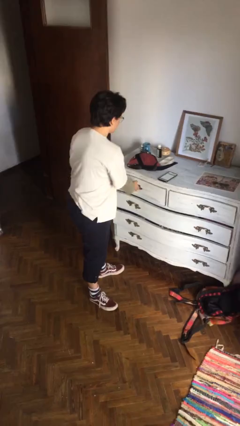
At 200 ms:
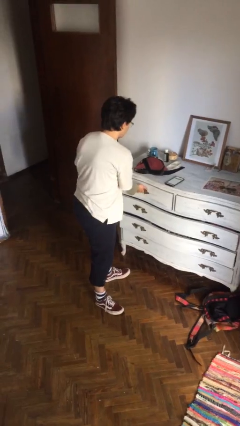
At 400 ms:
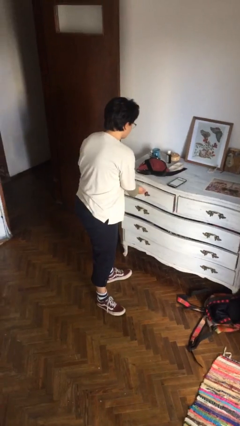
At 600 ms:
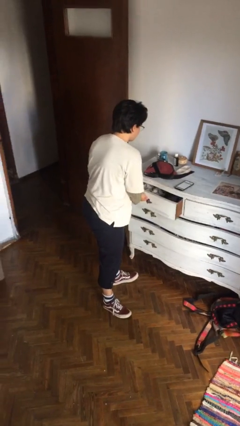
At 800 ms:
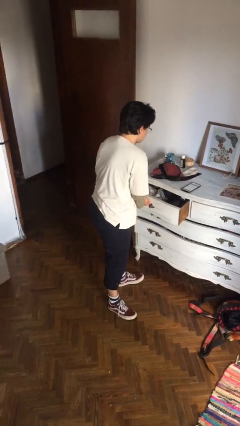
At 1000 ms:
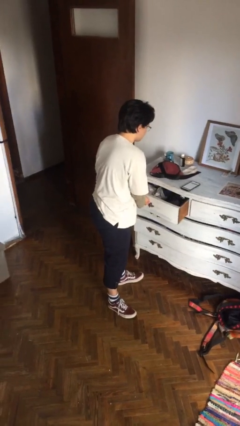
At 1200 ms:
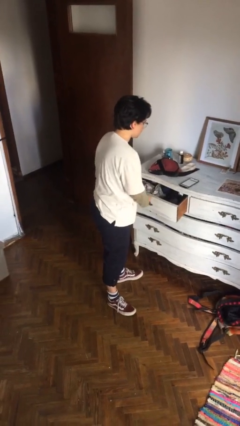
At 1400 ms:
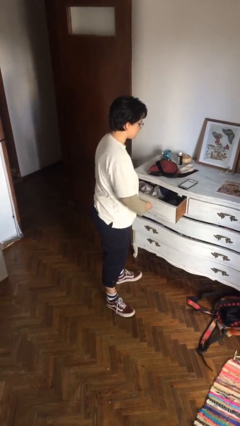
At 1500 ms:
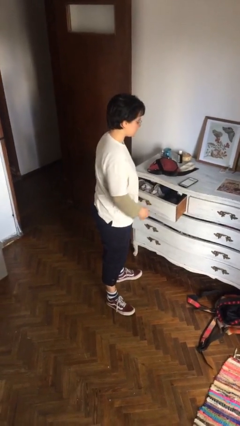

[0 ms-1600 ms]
person opens dresser drawer

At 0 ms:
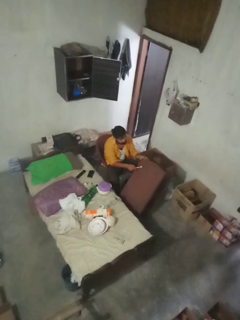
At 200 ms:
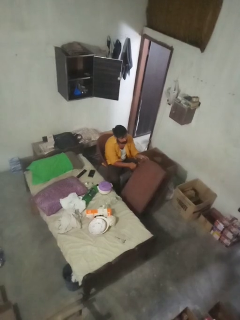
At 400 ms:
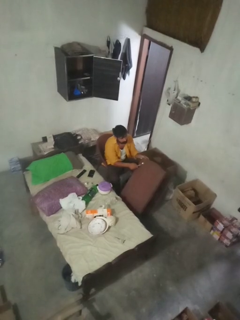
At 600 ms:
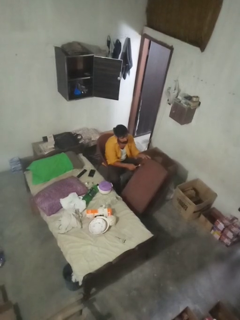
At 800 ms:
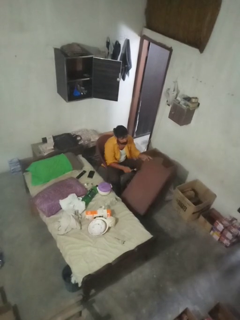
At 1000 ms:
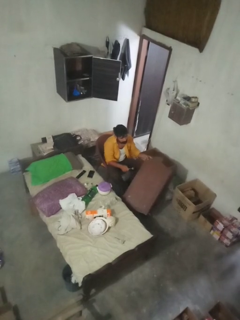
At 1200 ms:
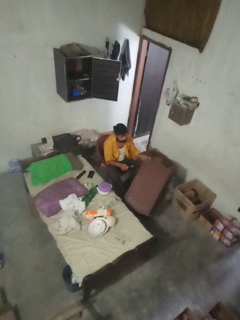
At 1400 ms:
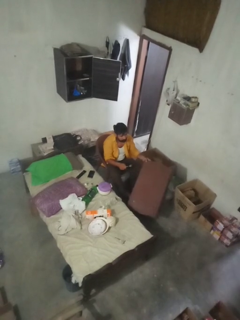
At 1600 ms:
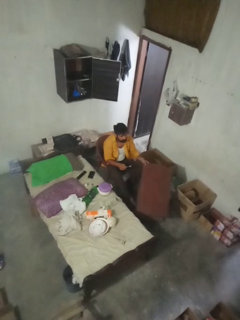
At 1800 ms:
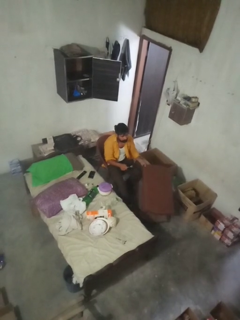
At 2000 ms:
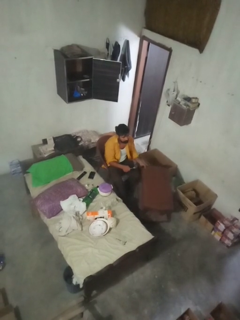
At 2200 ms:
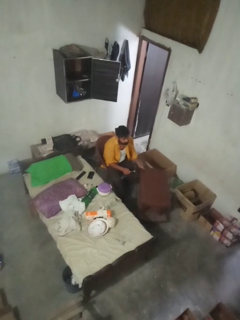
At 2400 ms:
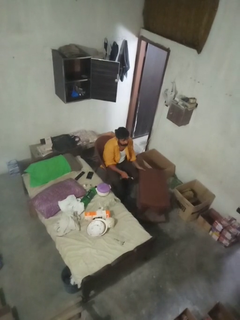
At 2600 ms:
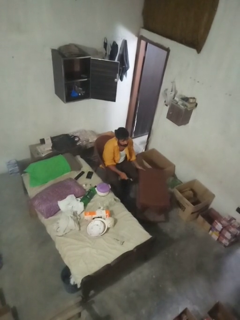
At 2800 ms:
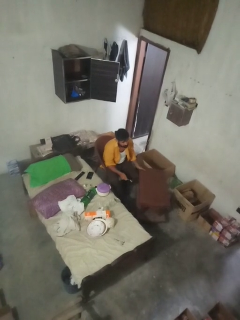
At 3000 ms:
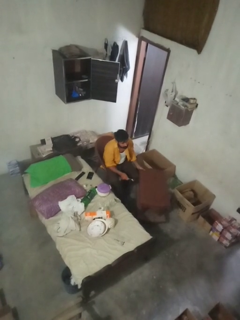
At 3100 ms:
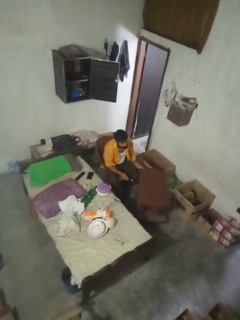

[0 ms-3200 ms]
person sets upright furniture

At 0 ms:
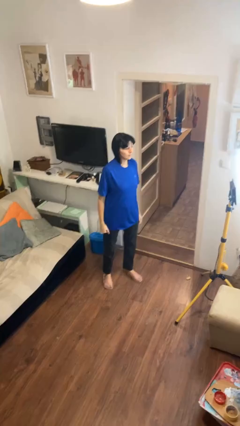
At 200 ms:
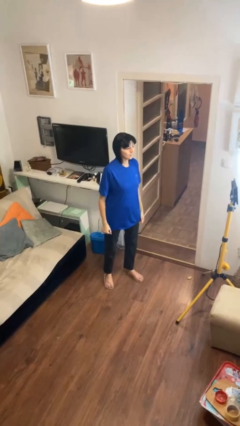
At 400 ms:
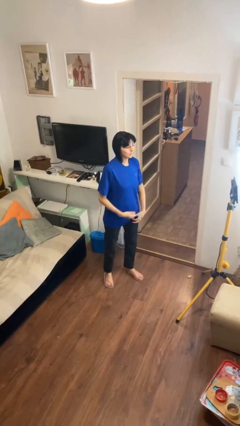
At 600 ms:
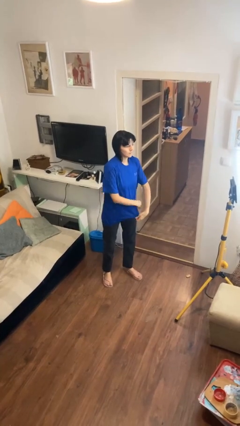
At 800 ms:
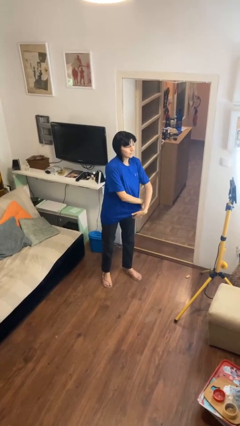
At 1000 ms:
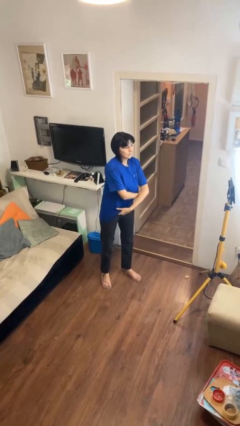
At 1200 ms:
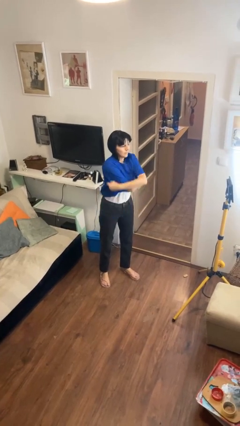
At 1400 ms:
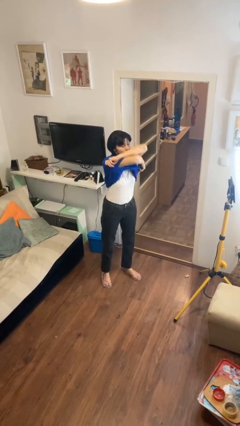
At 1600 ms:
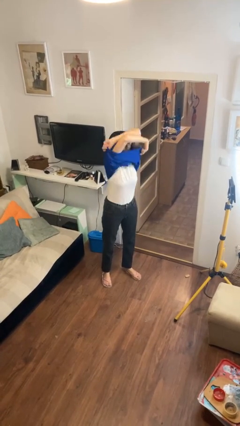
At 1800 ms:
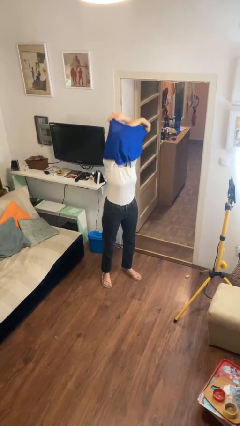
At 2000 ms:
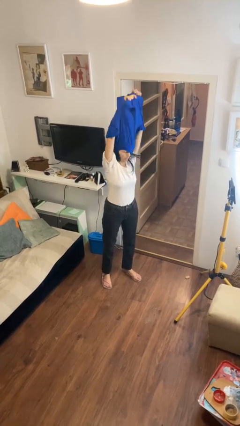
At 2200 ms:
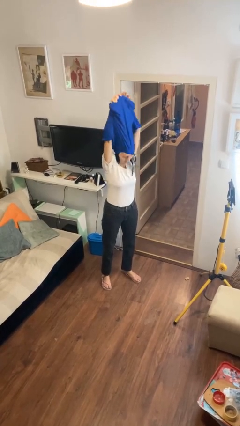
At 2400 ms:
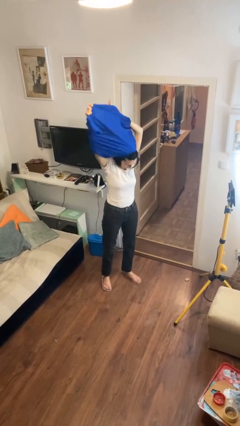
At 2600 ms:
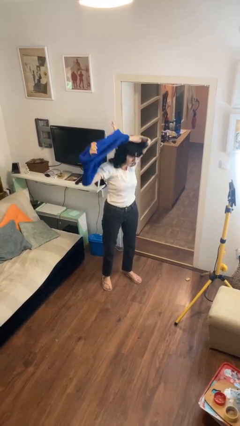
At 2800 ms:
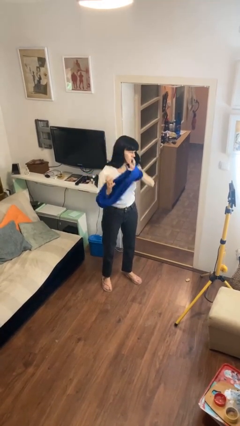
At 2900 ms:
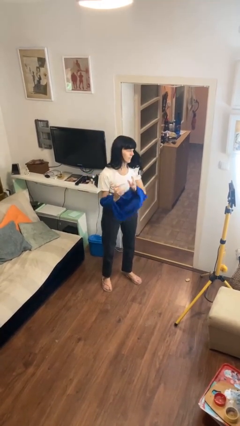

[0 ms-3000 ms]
person takes off shirt

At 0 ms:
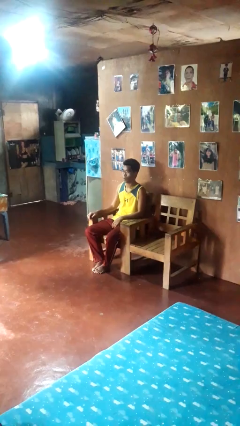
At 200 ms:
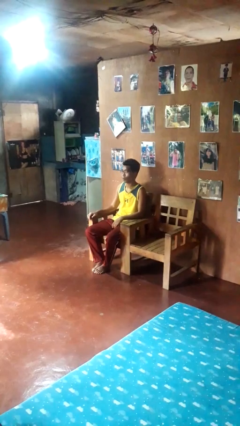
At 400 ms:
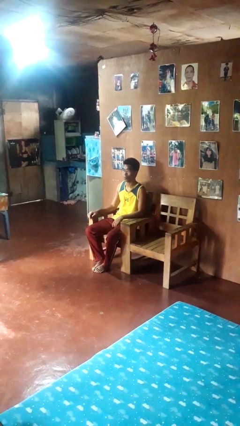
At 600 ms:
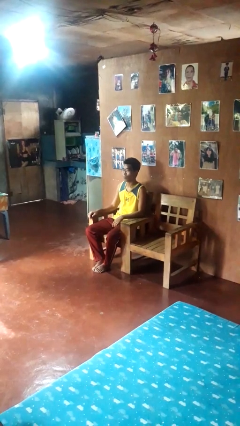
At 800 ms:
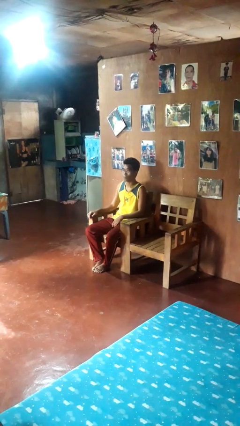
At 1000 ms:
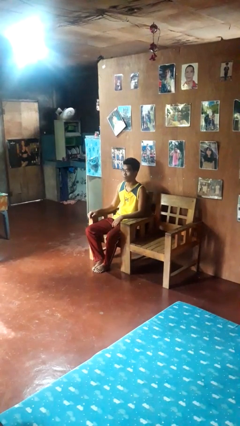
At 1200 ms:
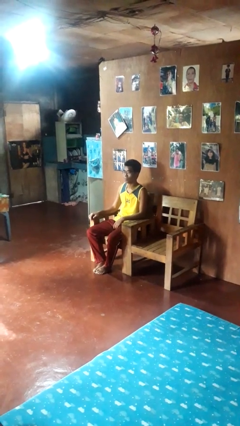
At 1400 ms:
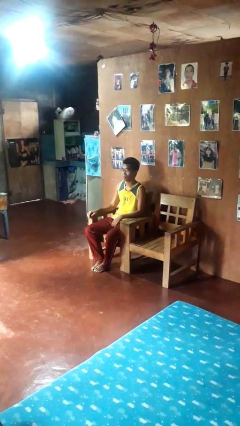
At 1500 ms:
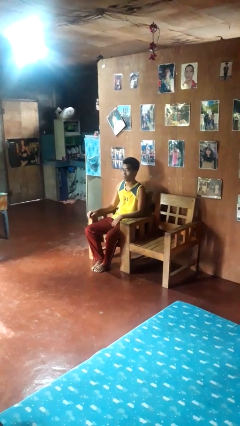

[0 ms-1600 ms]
person shakes head

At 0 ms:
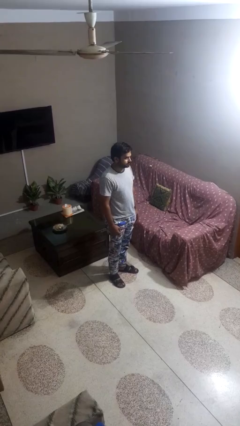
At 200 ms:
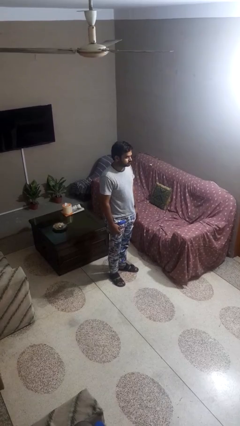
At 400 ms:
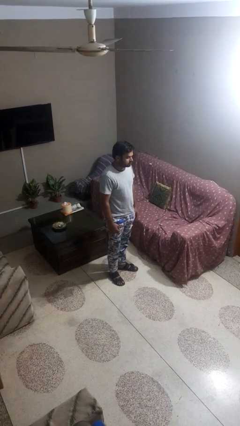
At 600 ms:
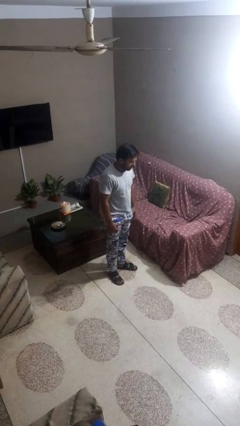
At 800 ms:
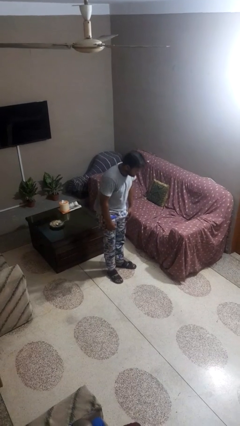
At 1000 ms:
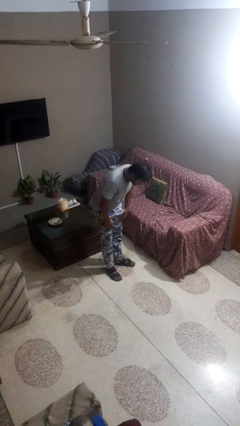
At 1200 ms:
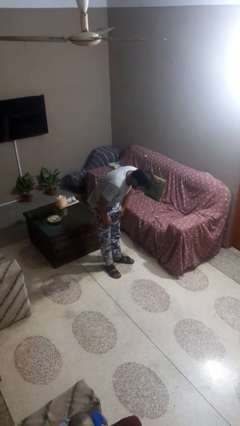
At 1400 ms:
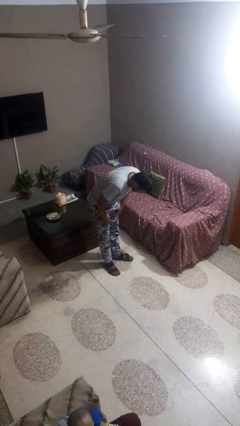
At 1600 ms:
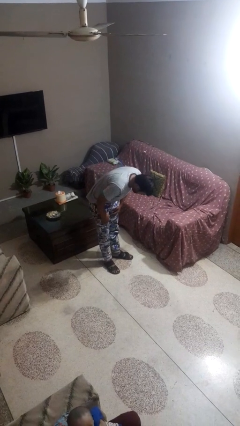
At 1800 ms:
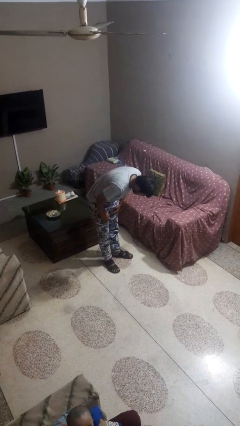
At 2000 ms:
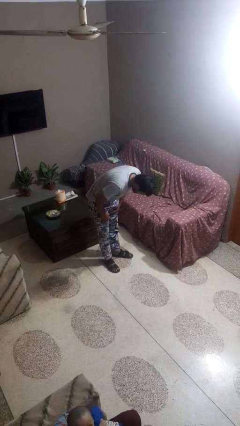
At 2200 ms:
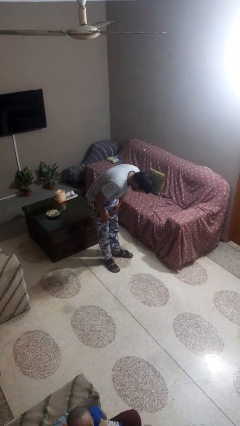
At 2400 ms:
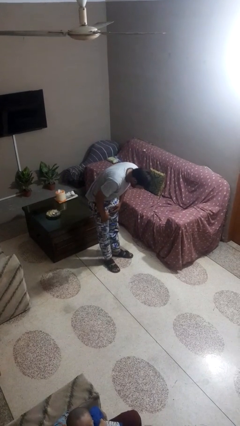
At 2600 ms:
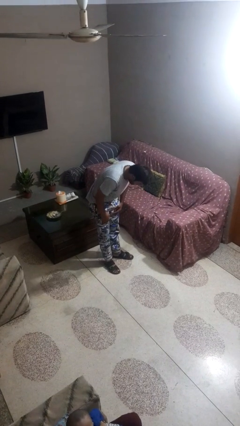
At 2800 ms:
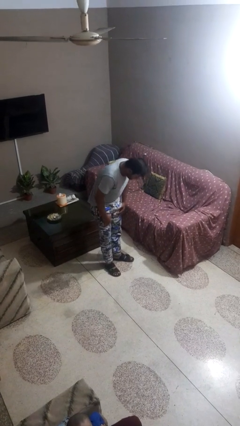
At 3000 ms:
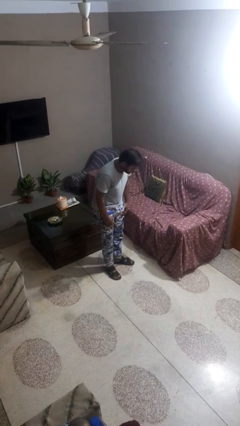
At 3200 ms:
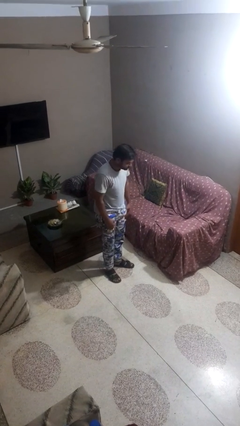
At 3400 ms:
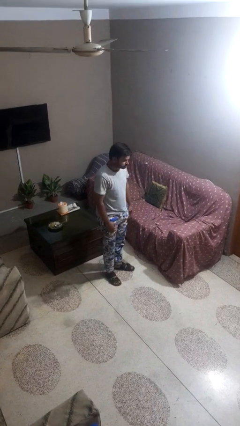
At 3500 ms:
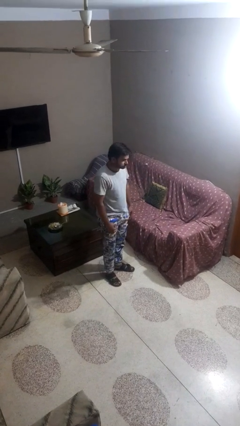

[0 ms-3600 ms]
person bows

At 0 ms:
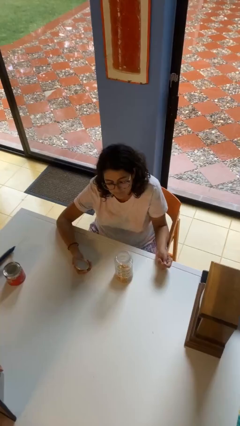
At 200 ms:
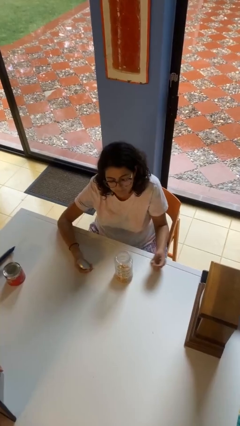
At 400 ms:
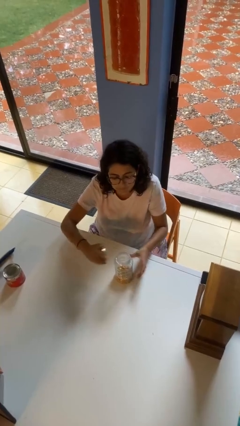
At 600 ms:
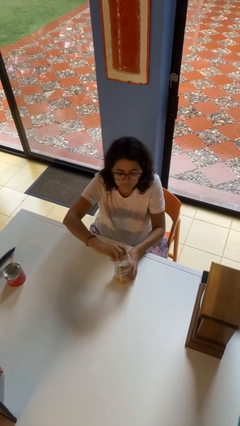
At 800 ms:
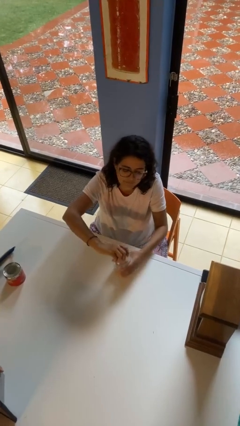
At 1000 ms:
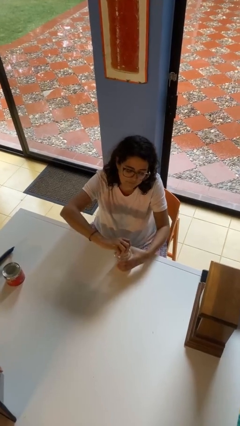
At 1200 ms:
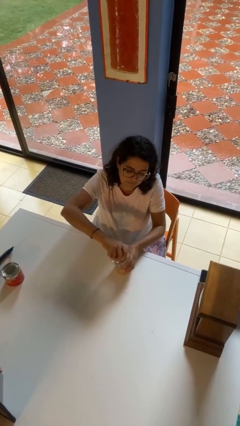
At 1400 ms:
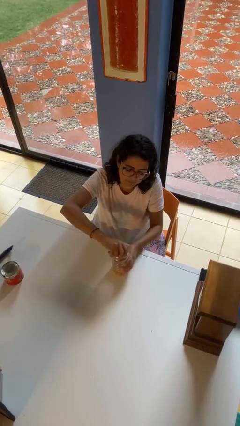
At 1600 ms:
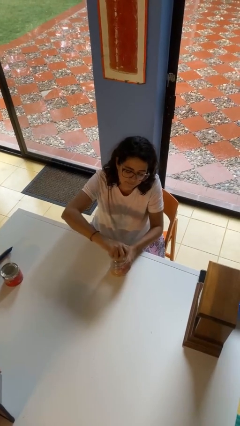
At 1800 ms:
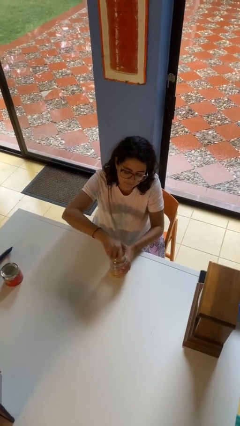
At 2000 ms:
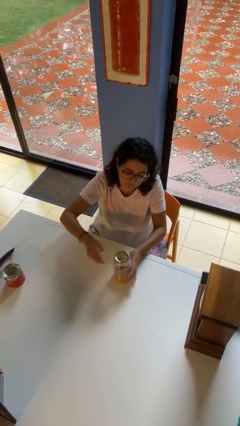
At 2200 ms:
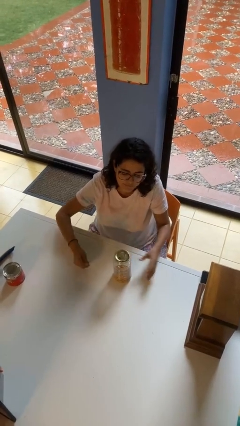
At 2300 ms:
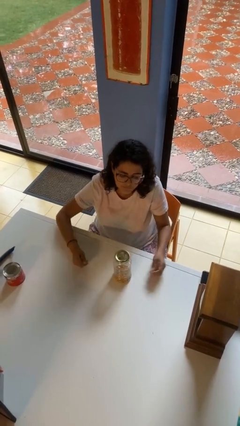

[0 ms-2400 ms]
person closes jar

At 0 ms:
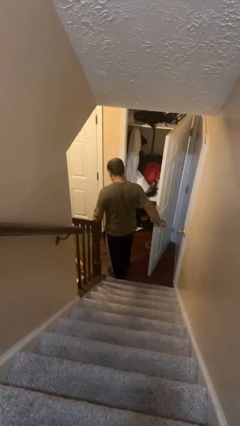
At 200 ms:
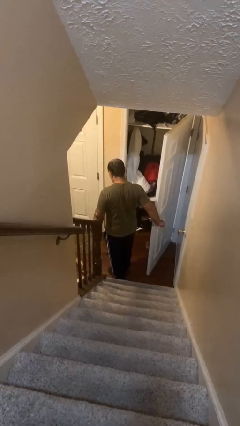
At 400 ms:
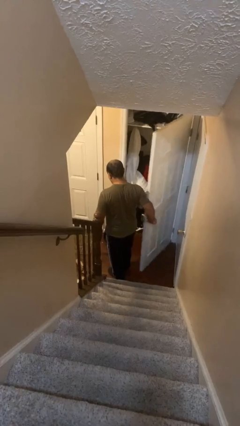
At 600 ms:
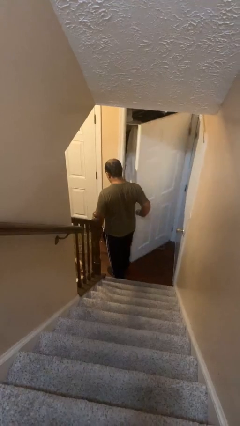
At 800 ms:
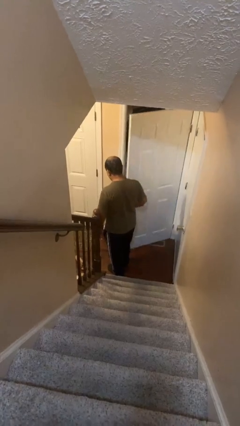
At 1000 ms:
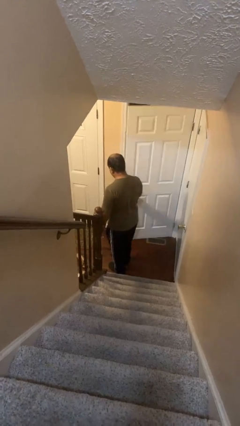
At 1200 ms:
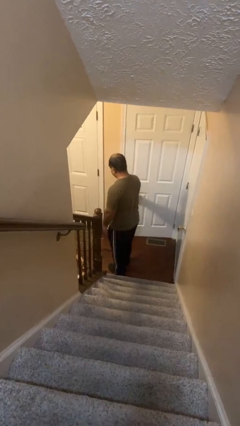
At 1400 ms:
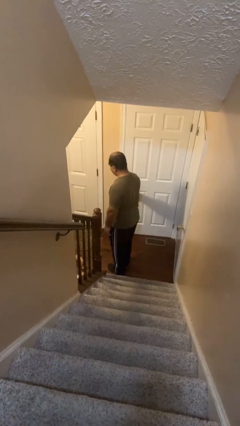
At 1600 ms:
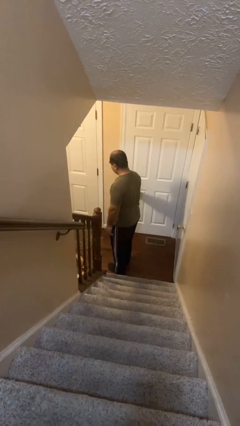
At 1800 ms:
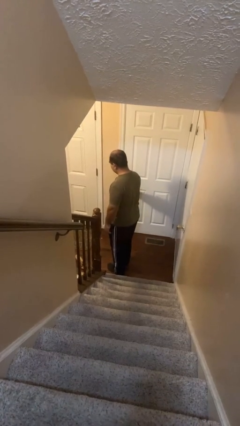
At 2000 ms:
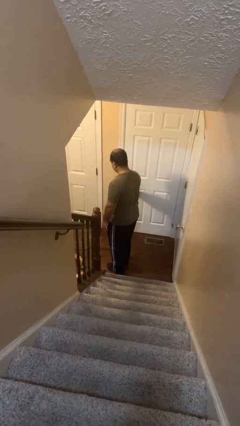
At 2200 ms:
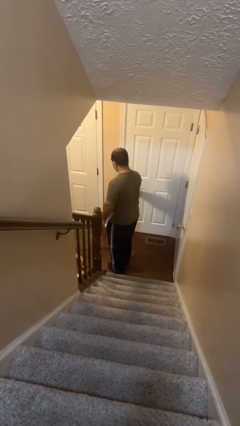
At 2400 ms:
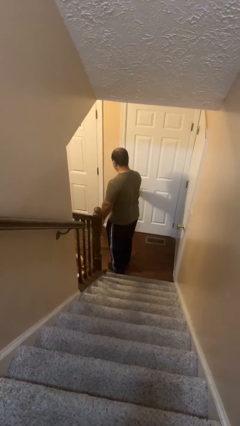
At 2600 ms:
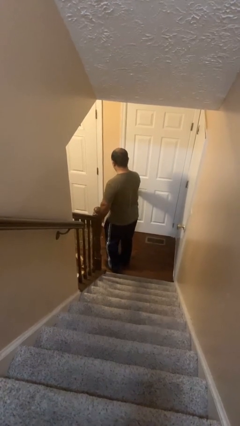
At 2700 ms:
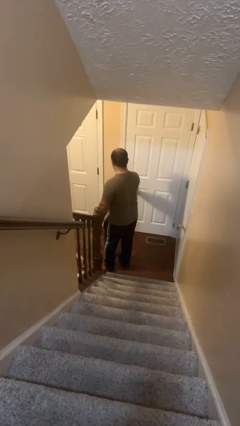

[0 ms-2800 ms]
person closes facility door
